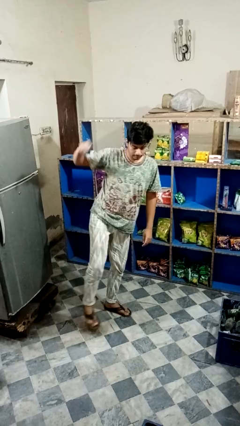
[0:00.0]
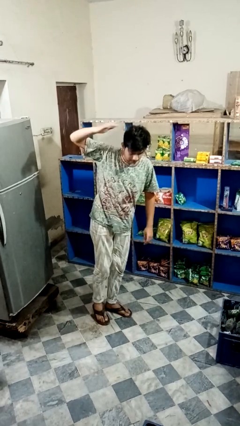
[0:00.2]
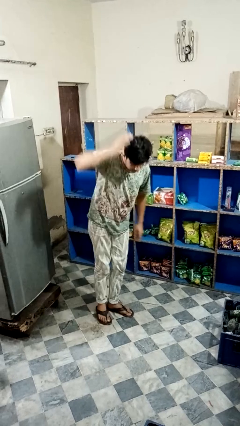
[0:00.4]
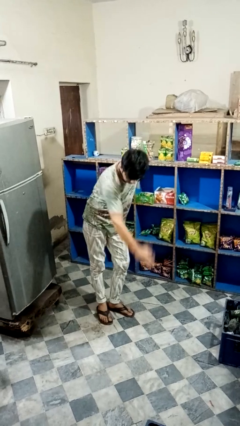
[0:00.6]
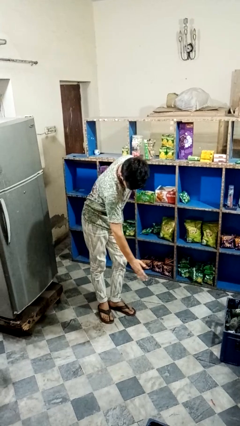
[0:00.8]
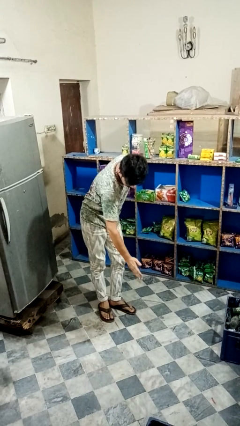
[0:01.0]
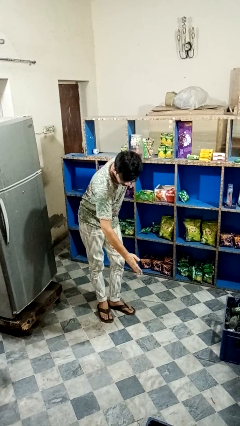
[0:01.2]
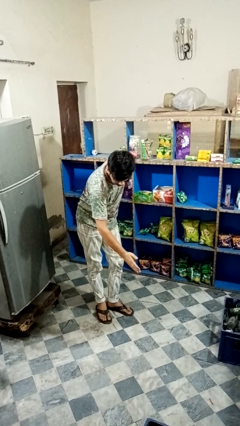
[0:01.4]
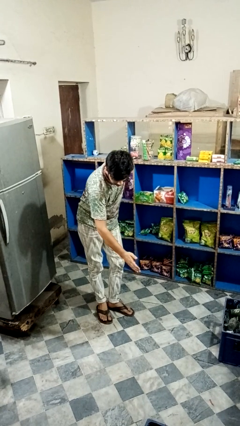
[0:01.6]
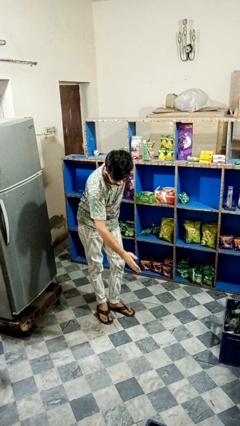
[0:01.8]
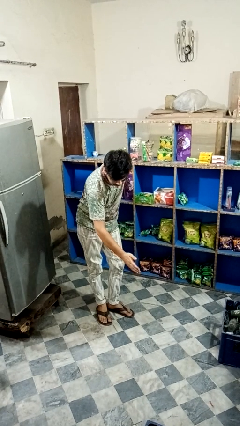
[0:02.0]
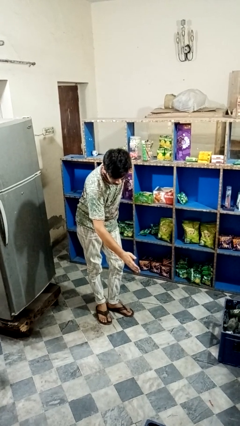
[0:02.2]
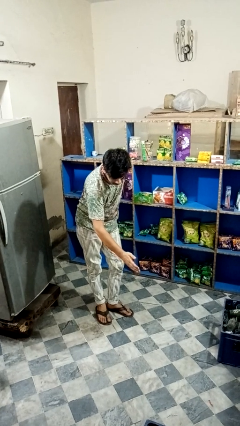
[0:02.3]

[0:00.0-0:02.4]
person karate chop

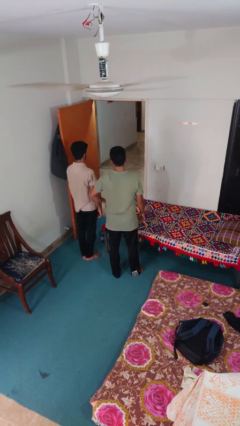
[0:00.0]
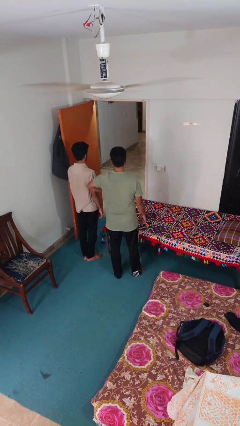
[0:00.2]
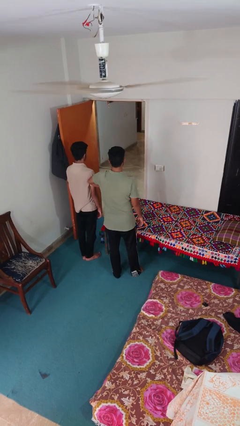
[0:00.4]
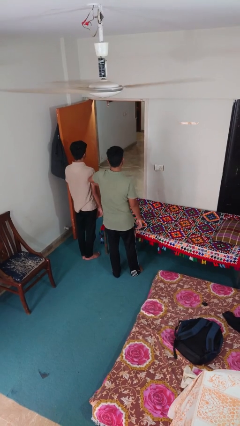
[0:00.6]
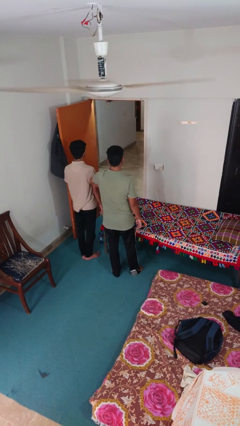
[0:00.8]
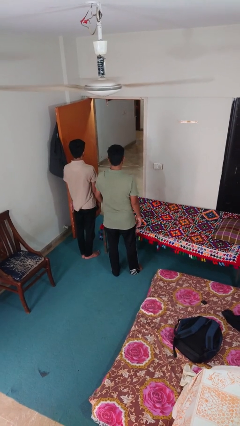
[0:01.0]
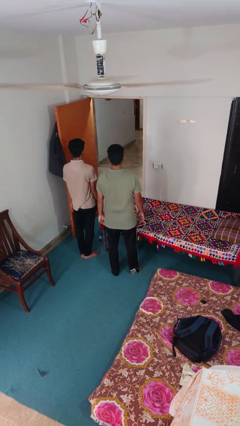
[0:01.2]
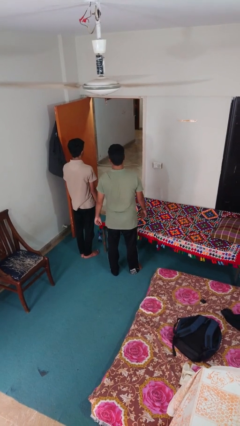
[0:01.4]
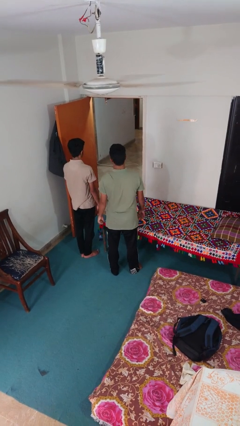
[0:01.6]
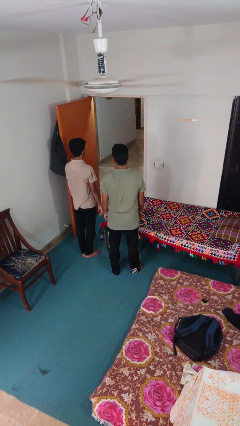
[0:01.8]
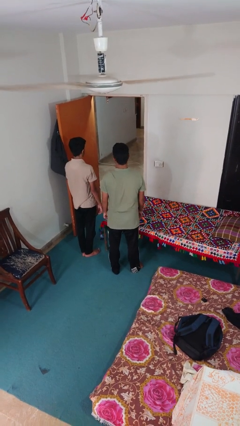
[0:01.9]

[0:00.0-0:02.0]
person nudges person with elbow

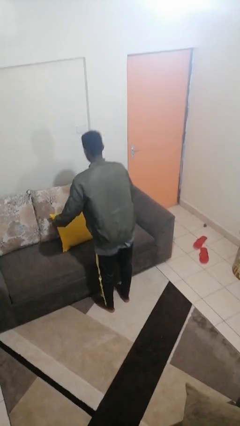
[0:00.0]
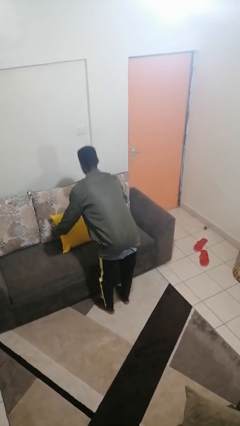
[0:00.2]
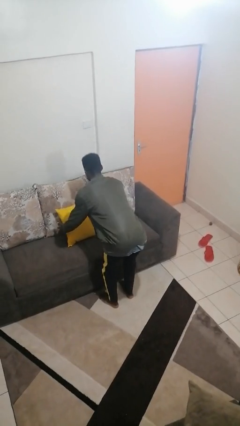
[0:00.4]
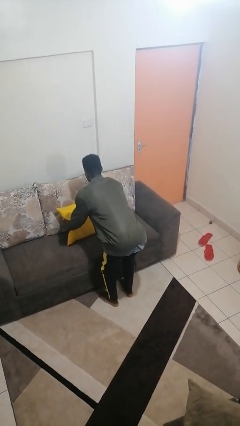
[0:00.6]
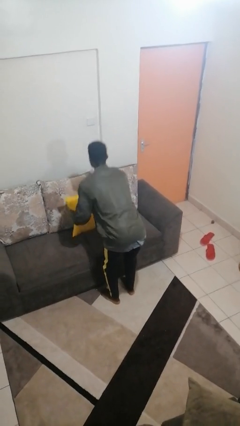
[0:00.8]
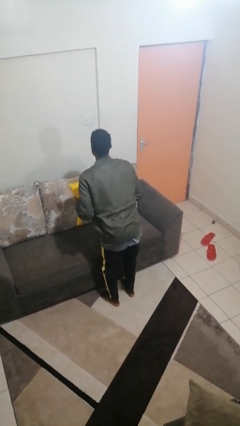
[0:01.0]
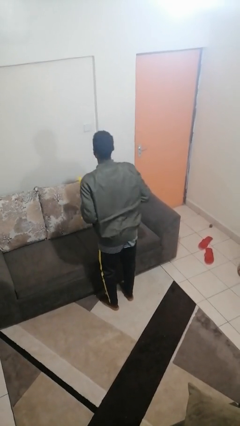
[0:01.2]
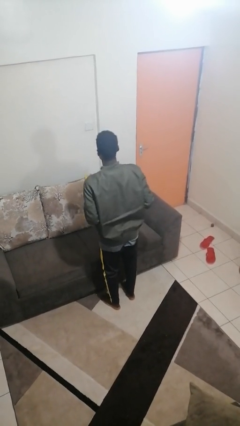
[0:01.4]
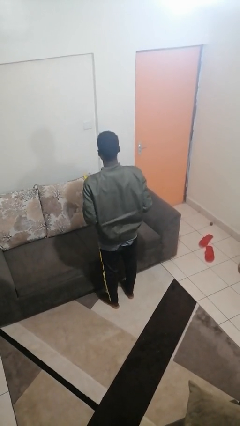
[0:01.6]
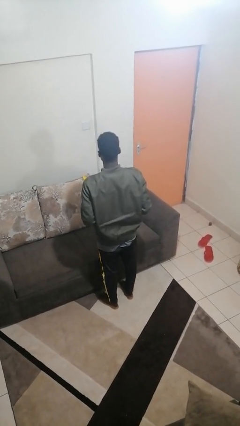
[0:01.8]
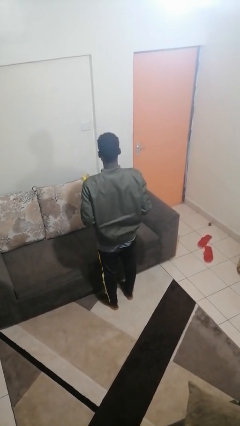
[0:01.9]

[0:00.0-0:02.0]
person picks up object from couch

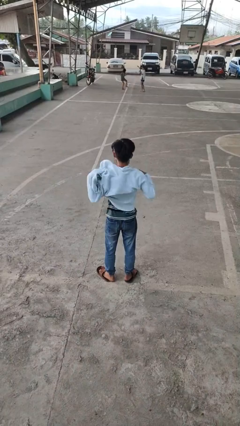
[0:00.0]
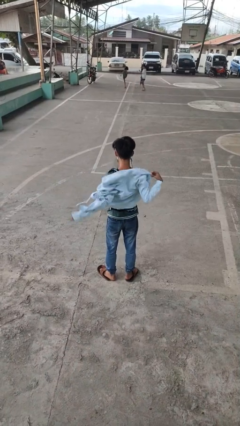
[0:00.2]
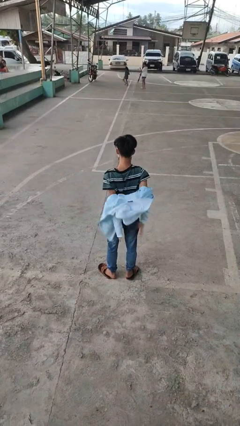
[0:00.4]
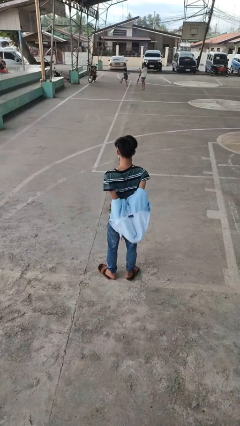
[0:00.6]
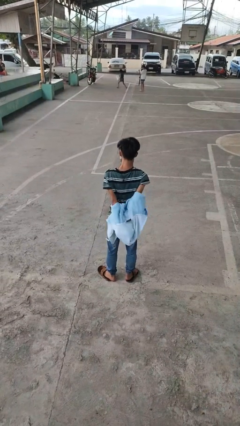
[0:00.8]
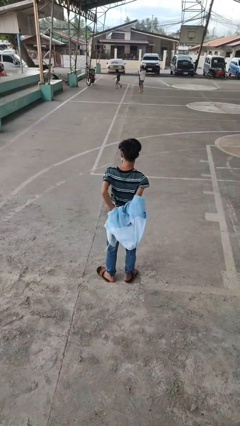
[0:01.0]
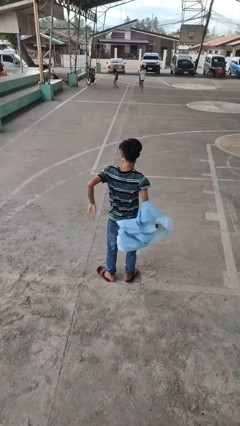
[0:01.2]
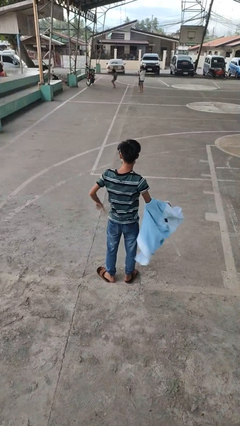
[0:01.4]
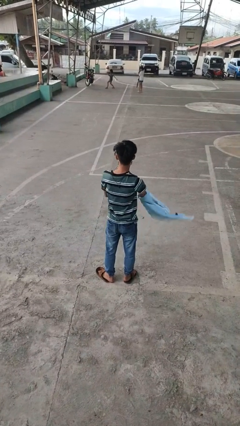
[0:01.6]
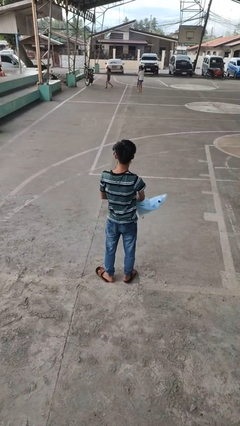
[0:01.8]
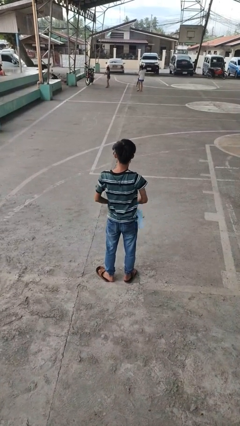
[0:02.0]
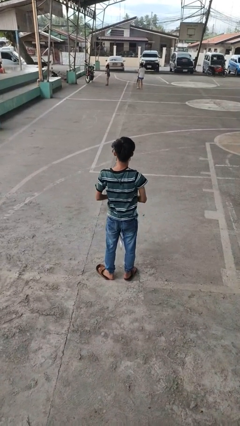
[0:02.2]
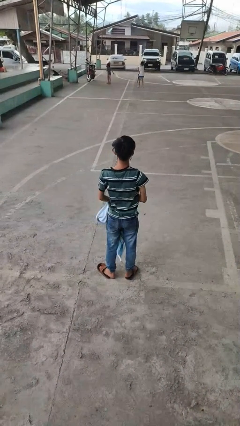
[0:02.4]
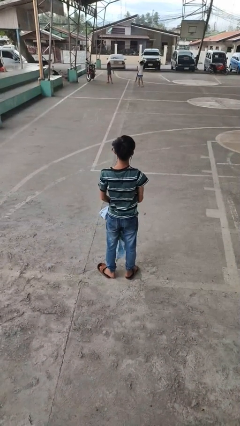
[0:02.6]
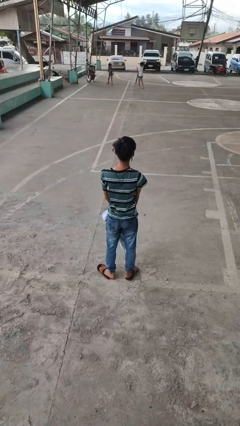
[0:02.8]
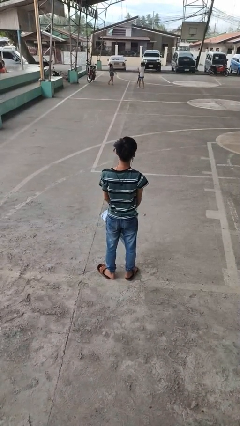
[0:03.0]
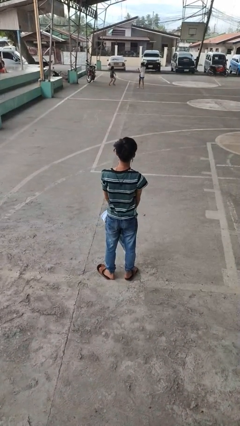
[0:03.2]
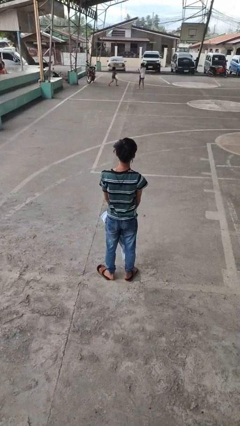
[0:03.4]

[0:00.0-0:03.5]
person takes off jacket

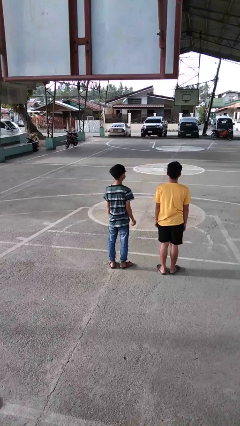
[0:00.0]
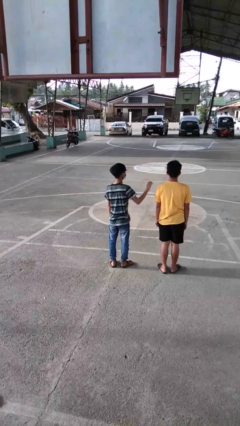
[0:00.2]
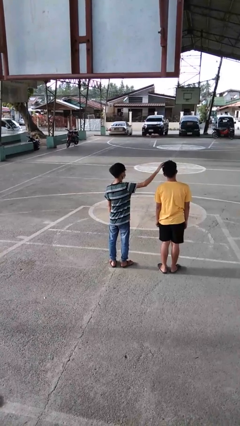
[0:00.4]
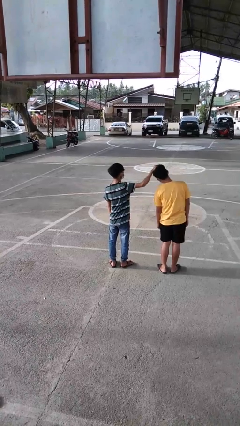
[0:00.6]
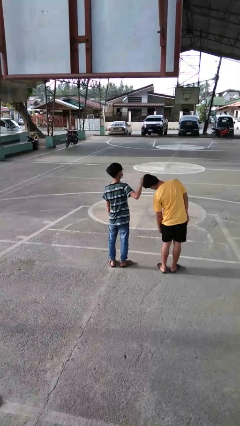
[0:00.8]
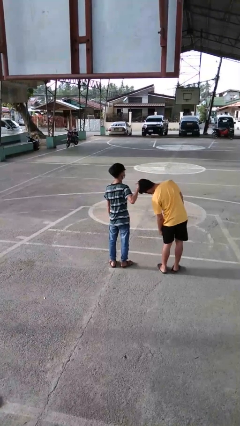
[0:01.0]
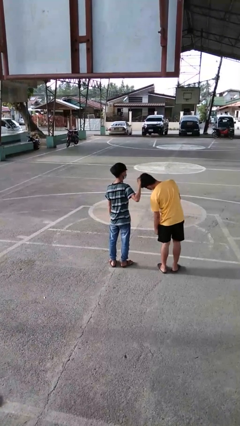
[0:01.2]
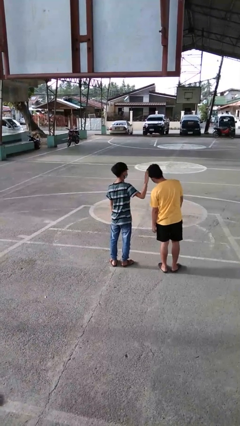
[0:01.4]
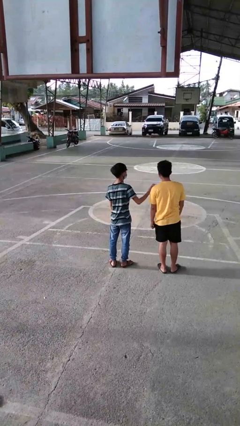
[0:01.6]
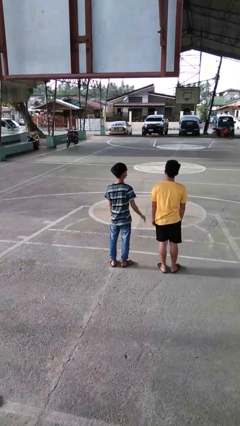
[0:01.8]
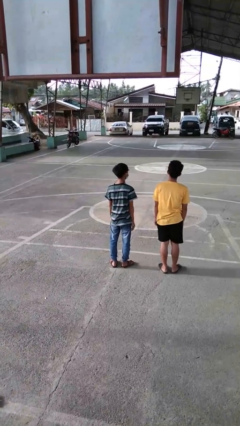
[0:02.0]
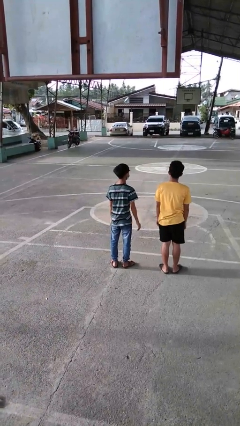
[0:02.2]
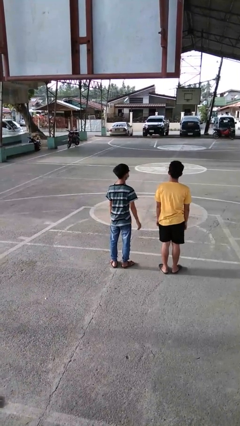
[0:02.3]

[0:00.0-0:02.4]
person grabs person by hair

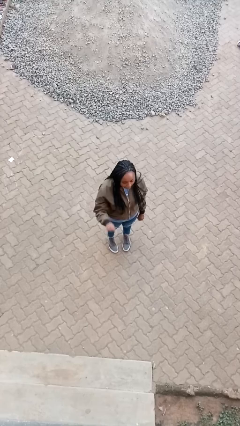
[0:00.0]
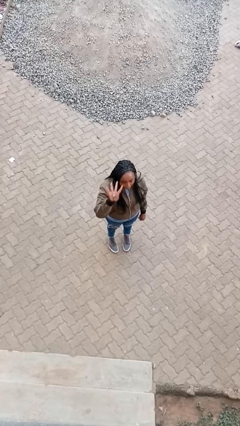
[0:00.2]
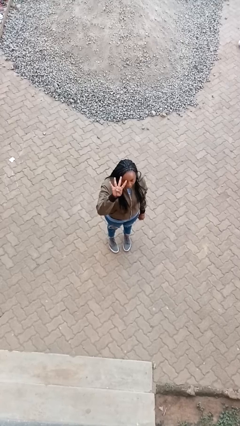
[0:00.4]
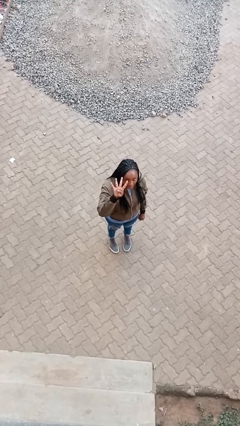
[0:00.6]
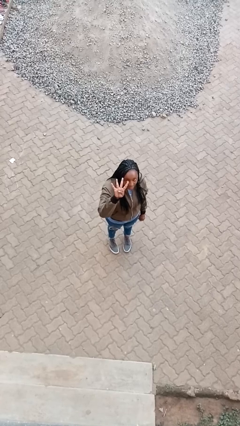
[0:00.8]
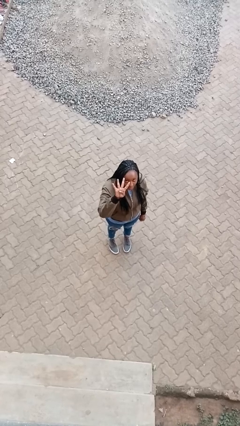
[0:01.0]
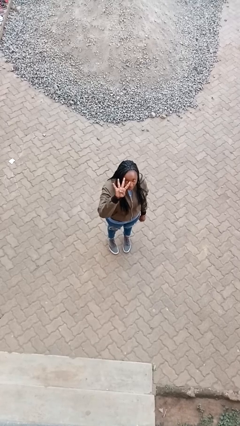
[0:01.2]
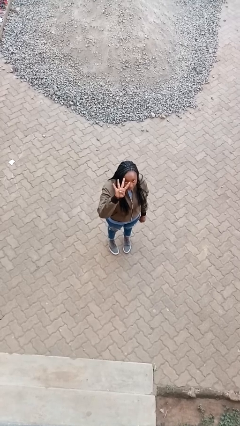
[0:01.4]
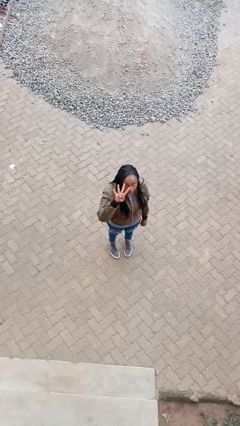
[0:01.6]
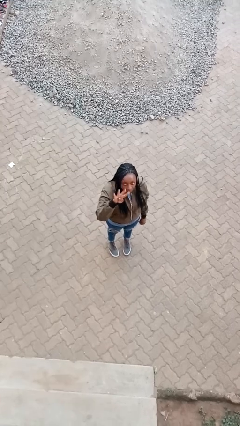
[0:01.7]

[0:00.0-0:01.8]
person gestures number four

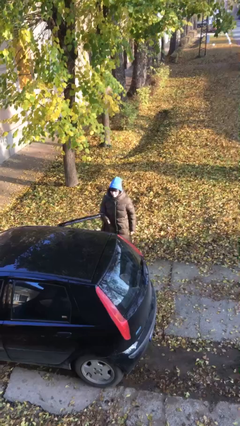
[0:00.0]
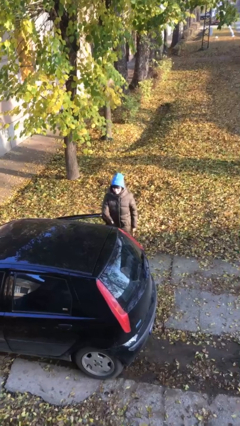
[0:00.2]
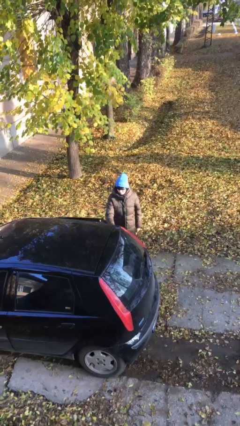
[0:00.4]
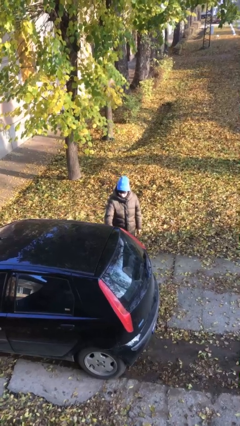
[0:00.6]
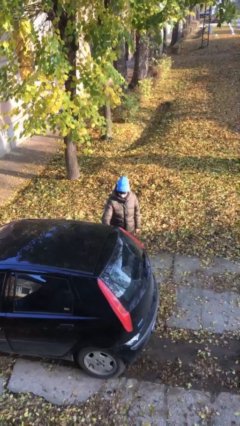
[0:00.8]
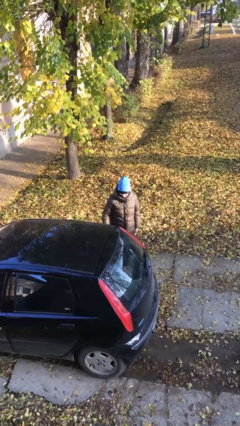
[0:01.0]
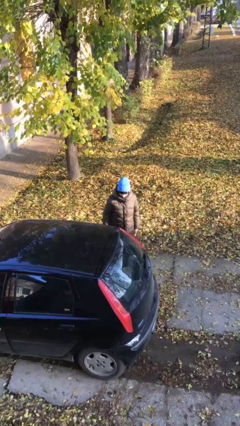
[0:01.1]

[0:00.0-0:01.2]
person closes car door

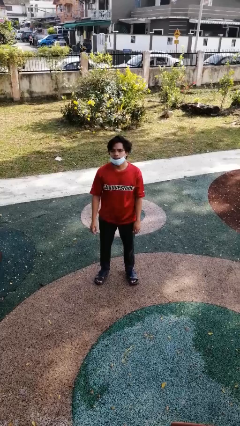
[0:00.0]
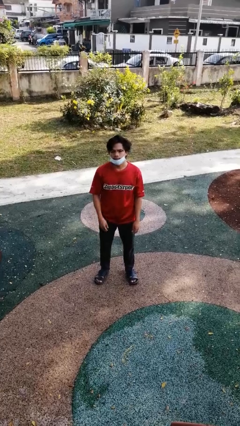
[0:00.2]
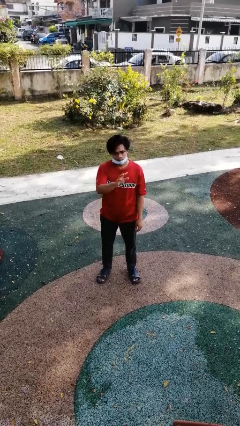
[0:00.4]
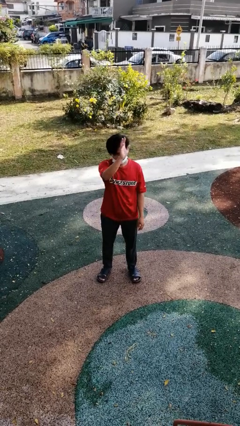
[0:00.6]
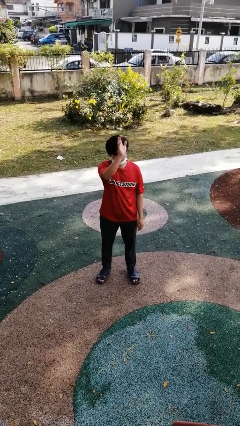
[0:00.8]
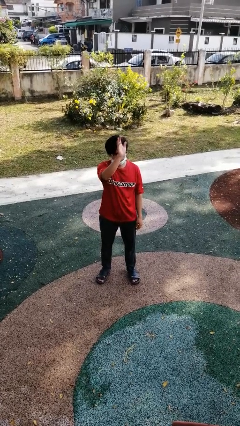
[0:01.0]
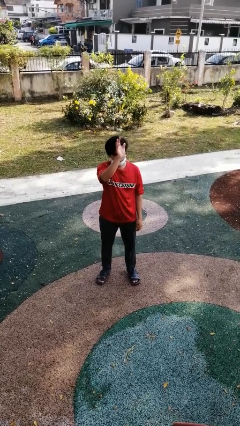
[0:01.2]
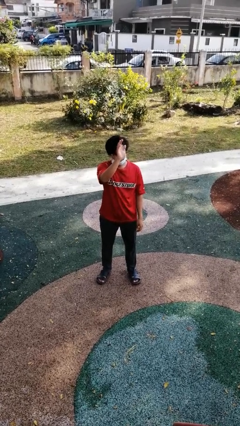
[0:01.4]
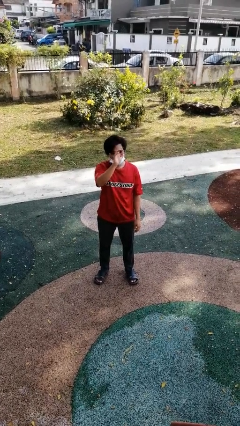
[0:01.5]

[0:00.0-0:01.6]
person waves at person
